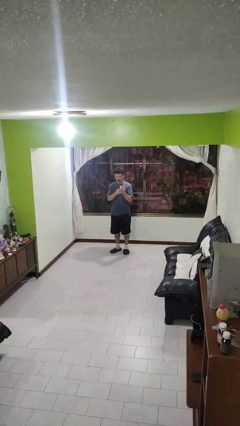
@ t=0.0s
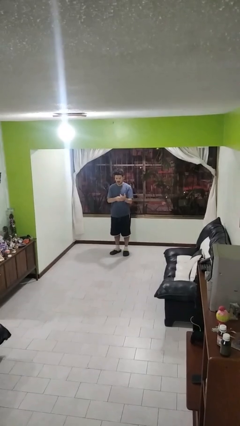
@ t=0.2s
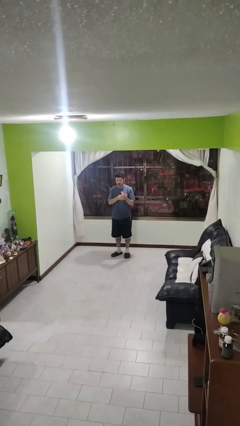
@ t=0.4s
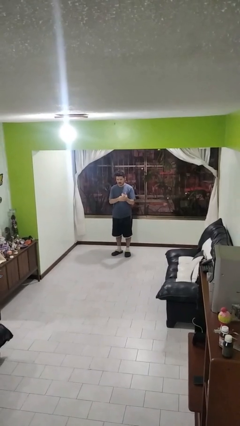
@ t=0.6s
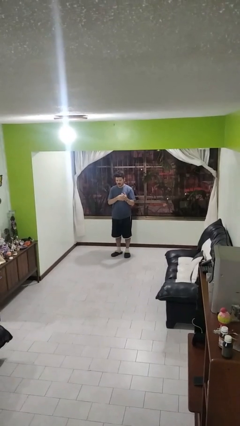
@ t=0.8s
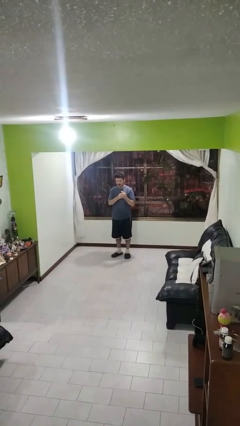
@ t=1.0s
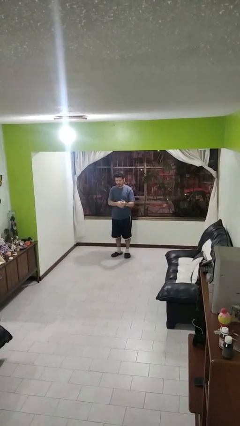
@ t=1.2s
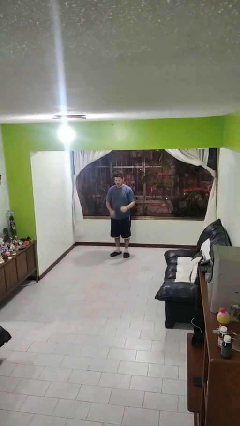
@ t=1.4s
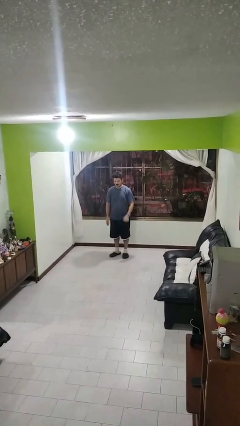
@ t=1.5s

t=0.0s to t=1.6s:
person snaps fingers

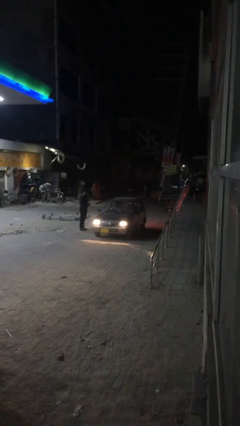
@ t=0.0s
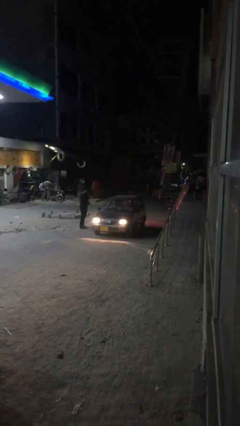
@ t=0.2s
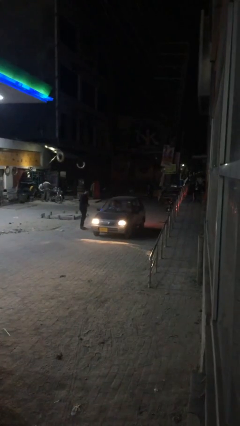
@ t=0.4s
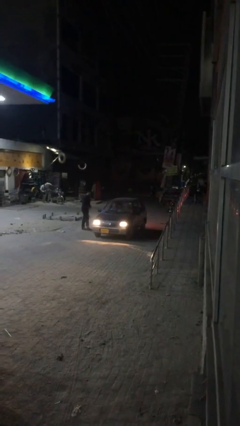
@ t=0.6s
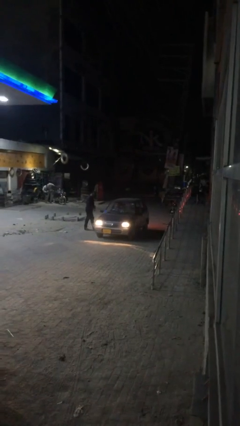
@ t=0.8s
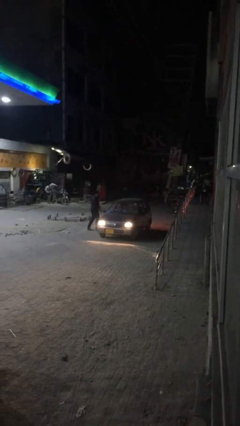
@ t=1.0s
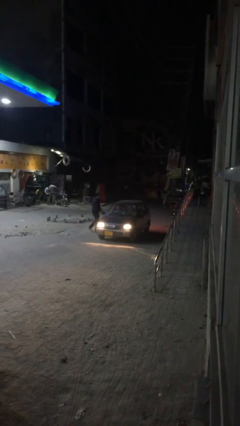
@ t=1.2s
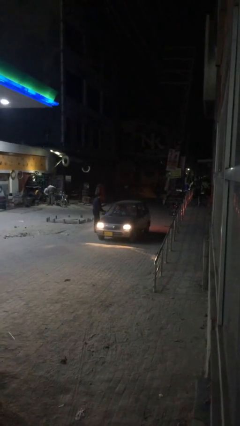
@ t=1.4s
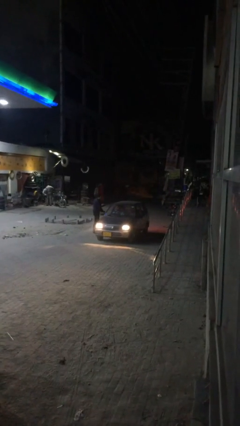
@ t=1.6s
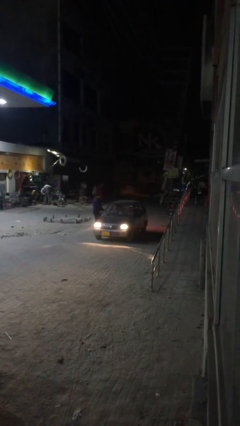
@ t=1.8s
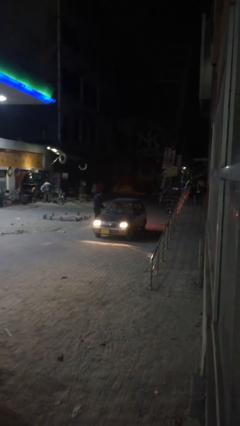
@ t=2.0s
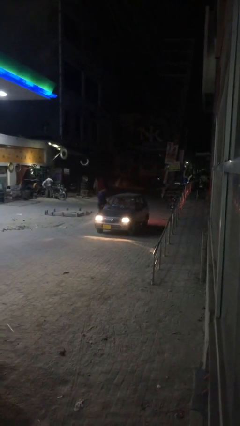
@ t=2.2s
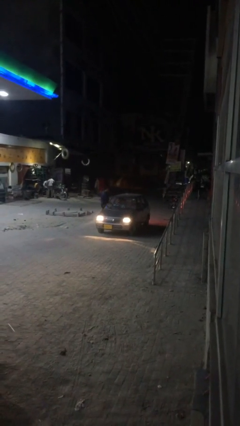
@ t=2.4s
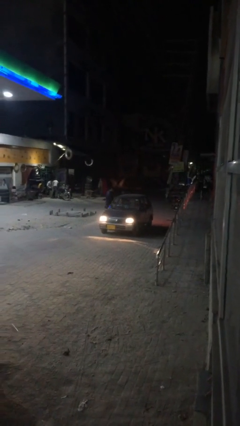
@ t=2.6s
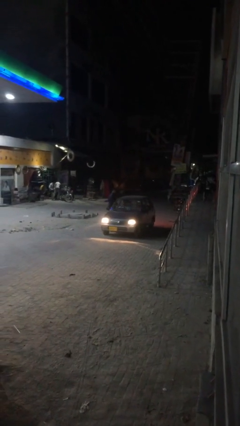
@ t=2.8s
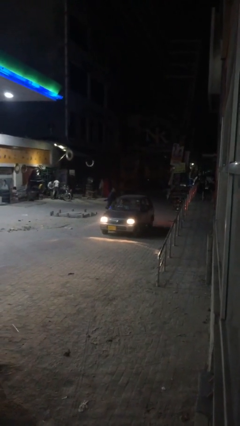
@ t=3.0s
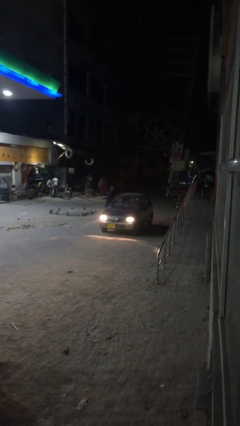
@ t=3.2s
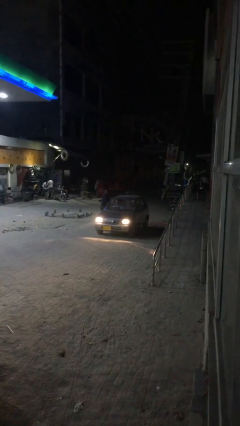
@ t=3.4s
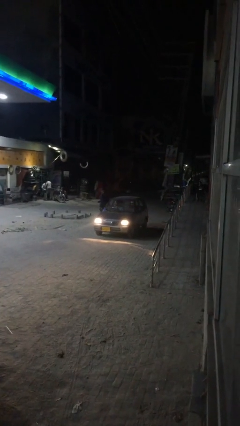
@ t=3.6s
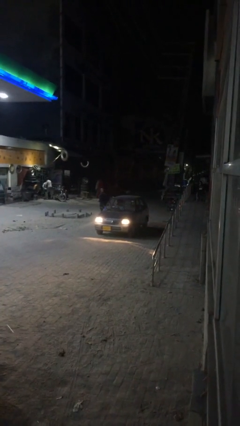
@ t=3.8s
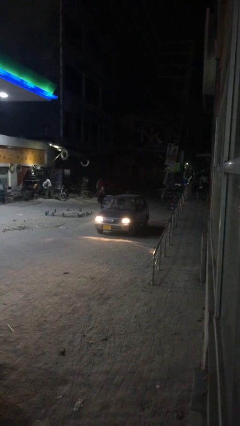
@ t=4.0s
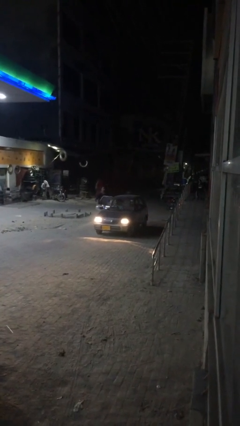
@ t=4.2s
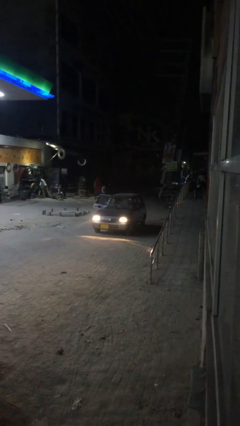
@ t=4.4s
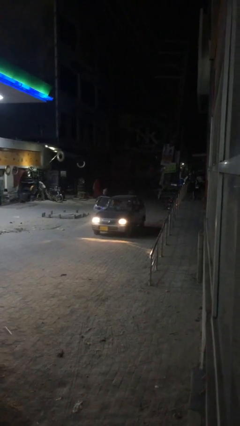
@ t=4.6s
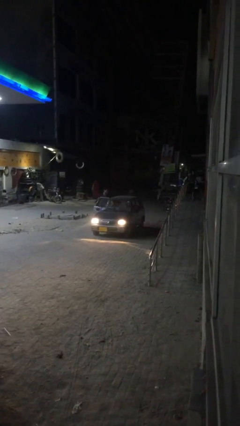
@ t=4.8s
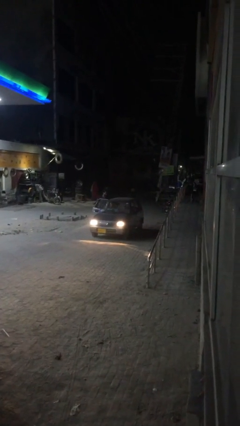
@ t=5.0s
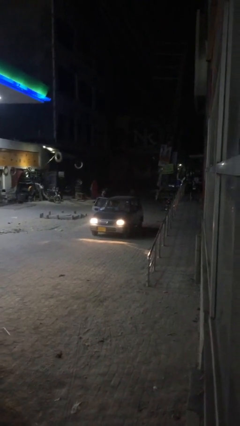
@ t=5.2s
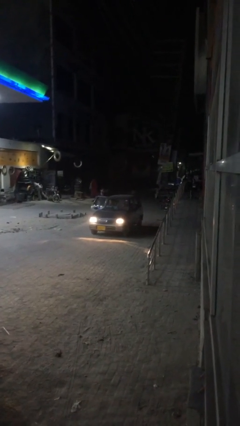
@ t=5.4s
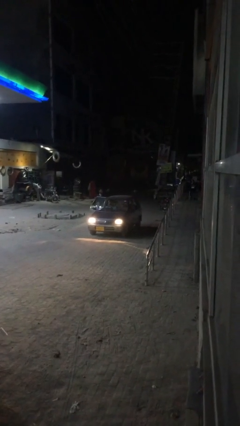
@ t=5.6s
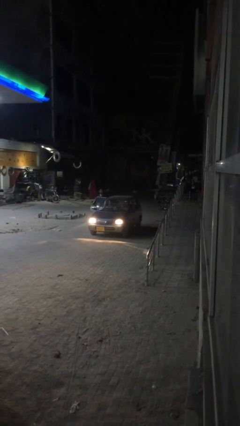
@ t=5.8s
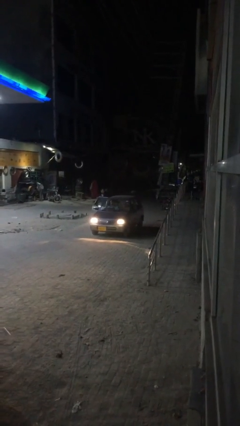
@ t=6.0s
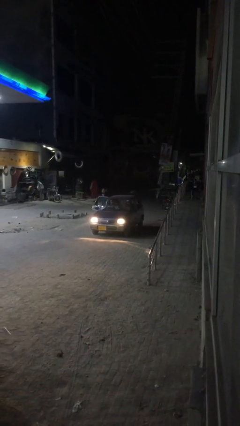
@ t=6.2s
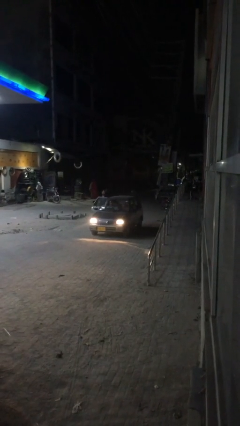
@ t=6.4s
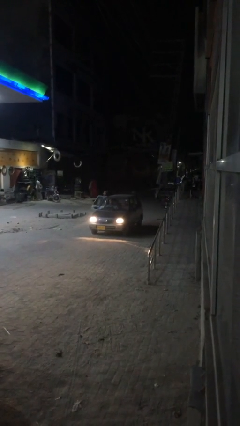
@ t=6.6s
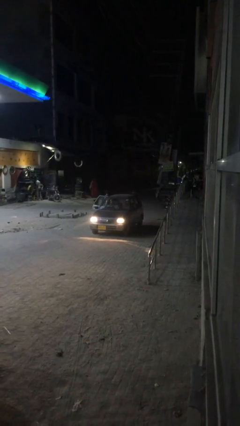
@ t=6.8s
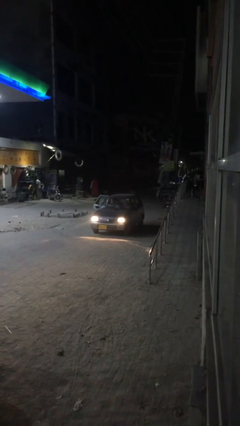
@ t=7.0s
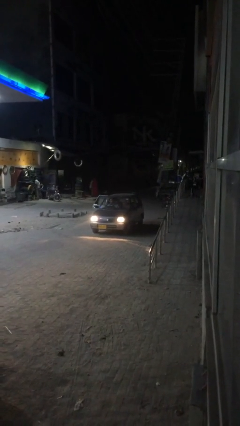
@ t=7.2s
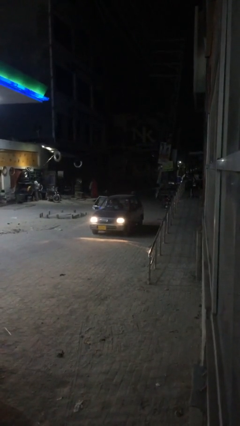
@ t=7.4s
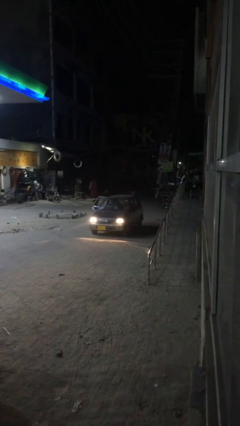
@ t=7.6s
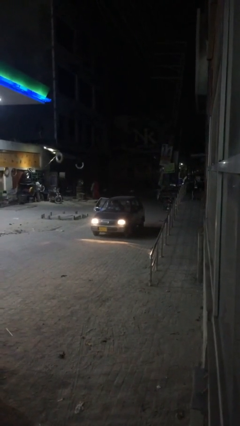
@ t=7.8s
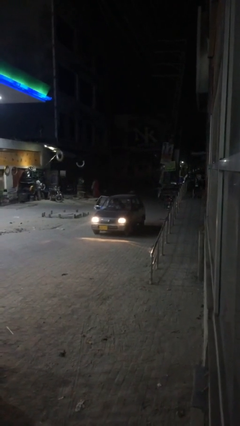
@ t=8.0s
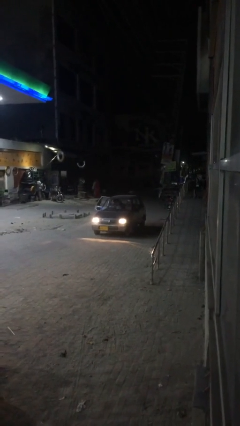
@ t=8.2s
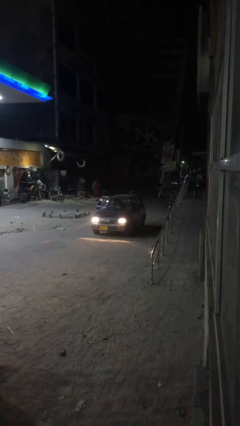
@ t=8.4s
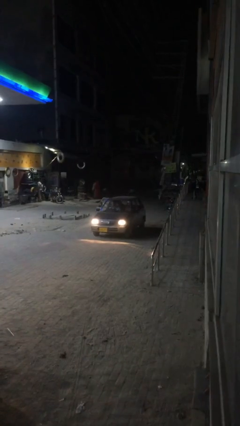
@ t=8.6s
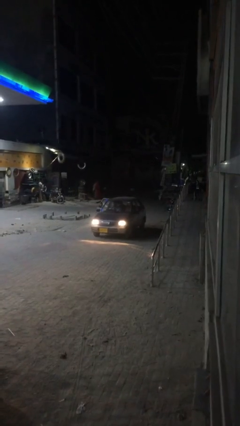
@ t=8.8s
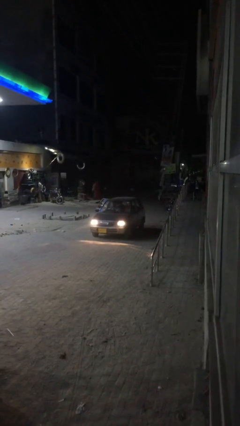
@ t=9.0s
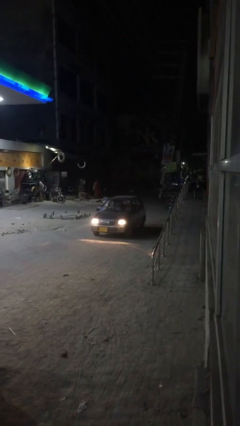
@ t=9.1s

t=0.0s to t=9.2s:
car picks up person

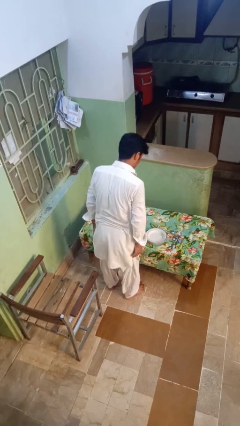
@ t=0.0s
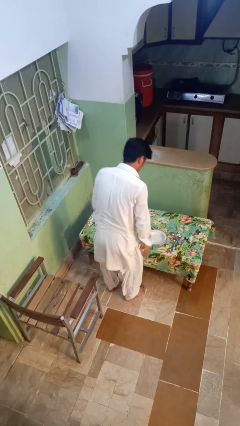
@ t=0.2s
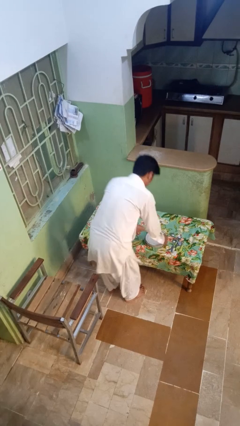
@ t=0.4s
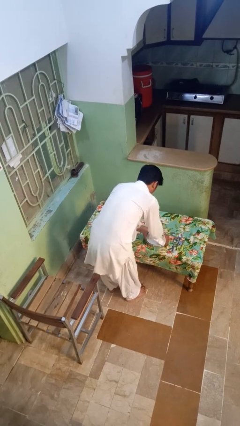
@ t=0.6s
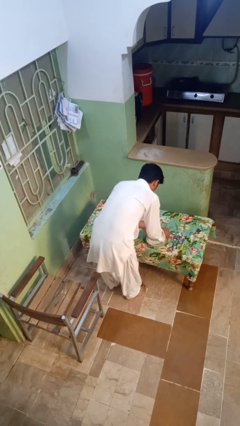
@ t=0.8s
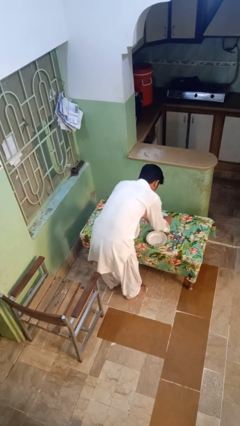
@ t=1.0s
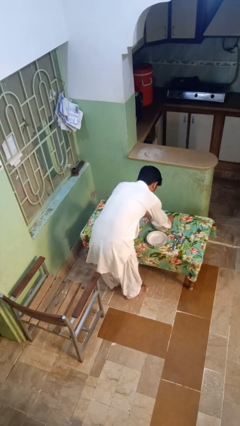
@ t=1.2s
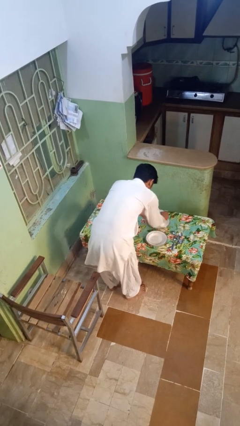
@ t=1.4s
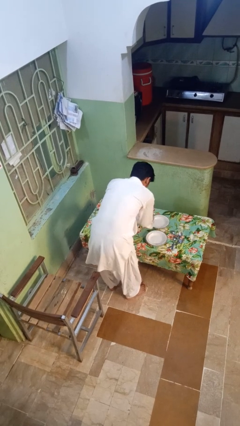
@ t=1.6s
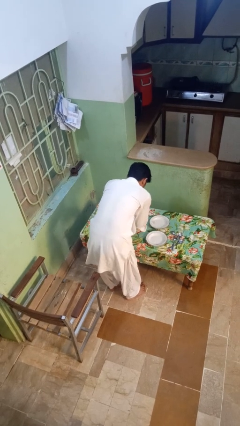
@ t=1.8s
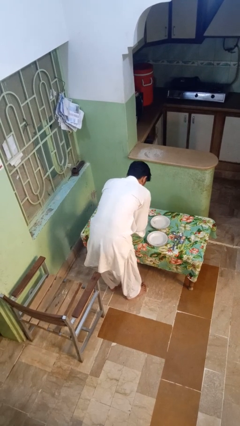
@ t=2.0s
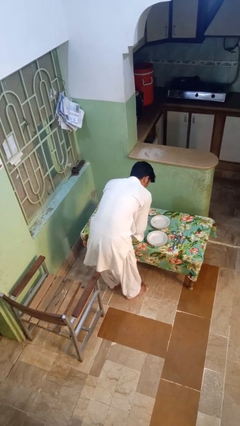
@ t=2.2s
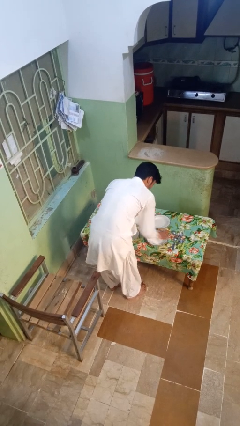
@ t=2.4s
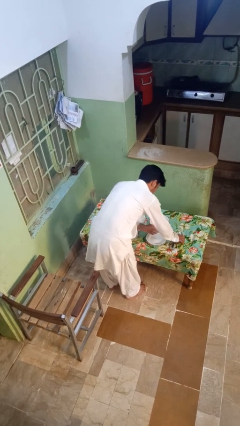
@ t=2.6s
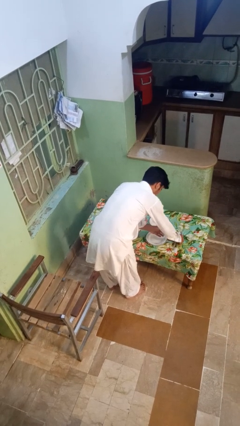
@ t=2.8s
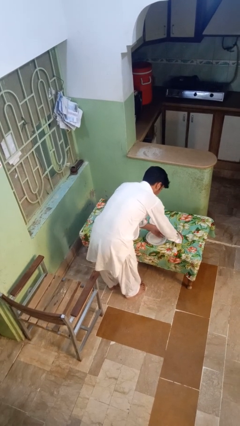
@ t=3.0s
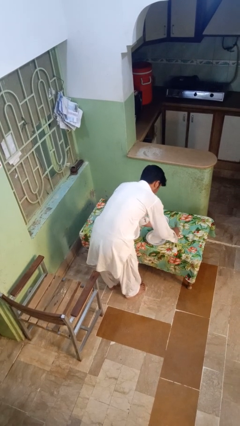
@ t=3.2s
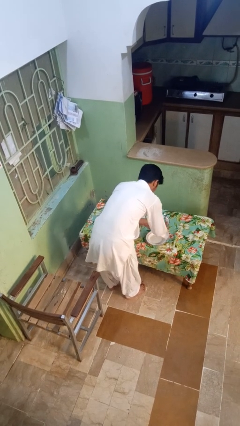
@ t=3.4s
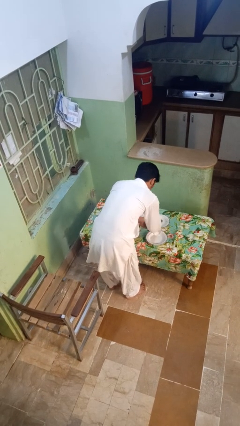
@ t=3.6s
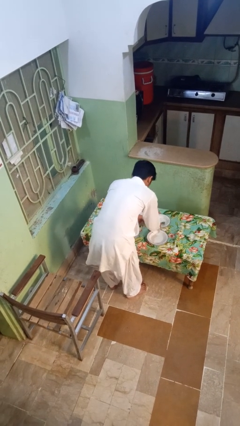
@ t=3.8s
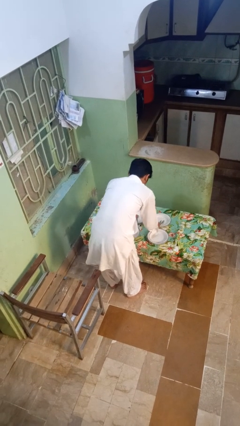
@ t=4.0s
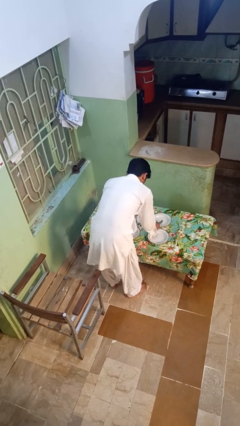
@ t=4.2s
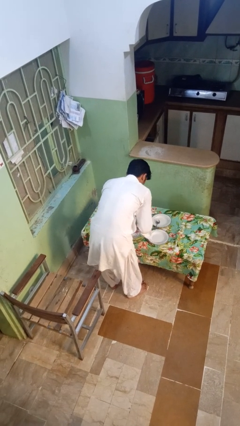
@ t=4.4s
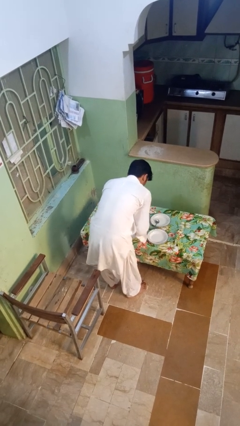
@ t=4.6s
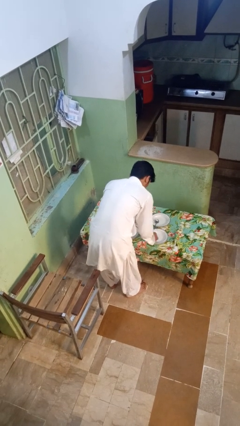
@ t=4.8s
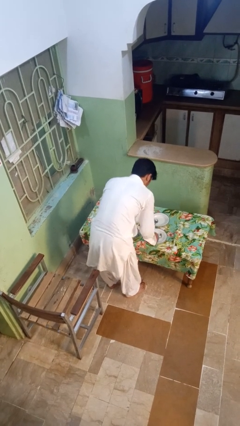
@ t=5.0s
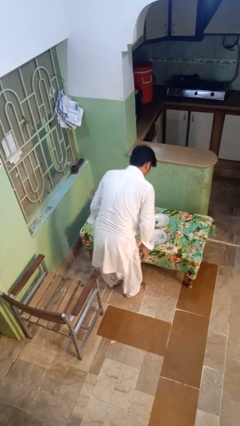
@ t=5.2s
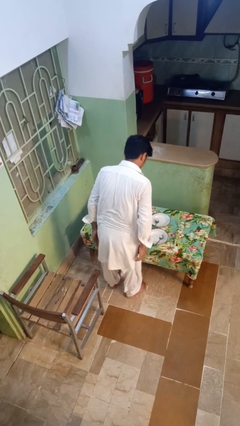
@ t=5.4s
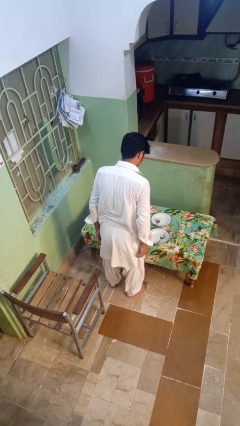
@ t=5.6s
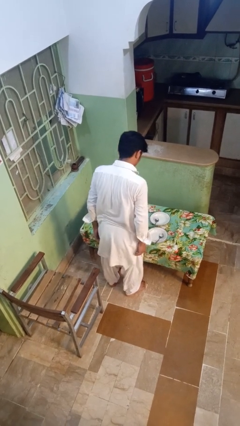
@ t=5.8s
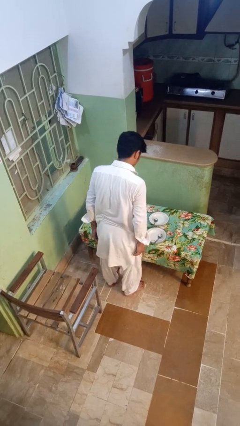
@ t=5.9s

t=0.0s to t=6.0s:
person sets table

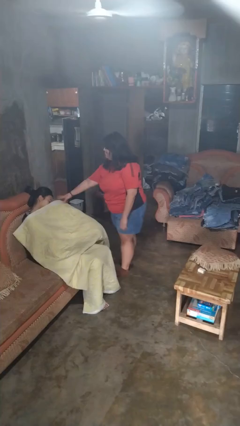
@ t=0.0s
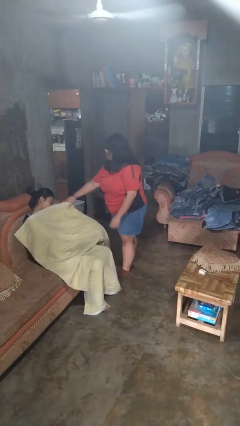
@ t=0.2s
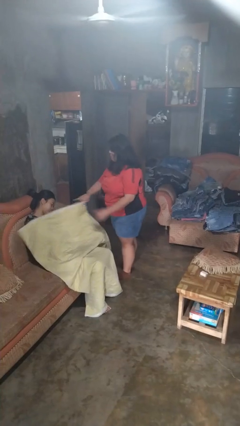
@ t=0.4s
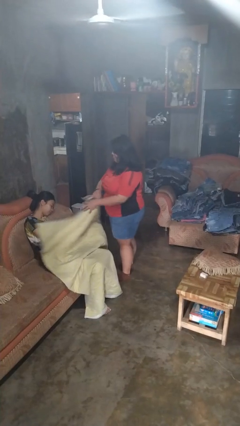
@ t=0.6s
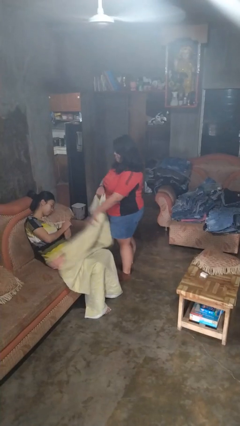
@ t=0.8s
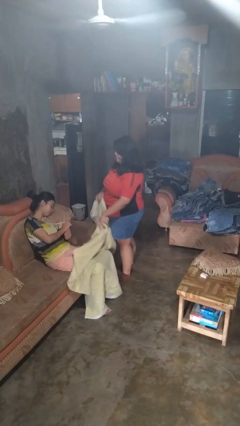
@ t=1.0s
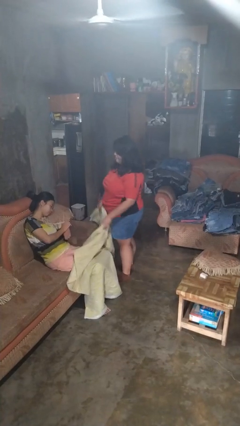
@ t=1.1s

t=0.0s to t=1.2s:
person uncovers friend with blanket
